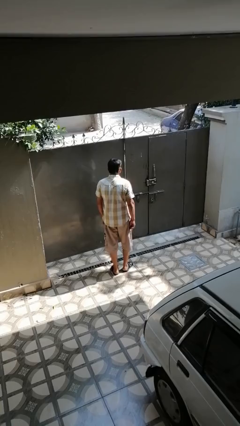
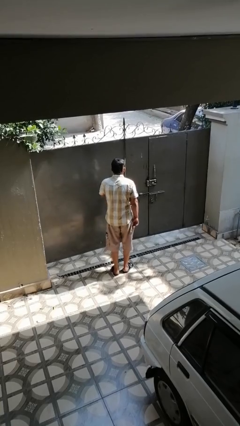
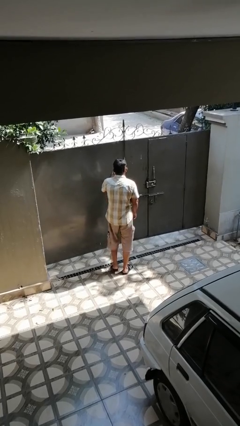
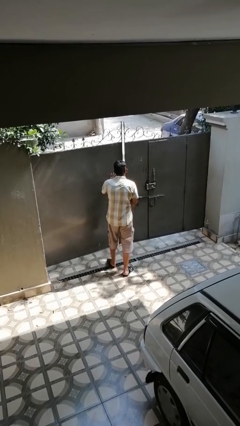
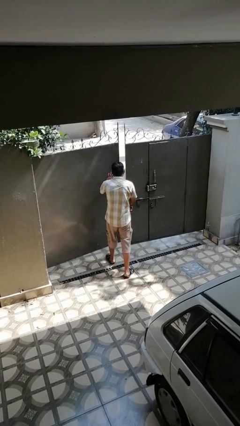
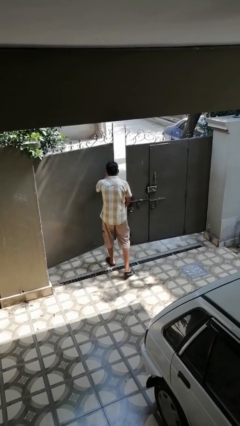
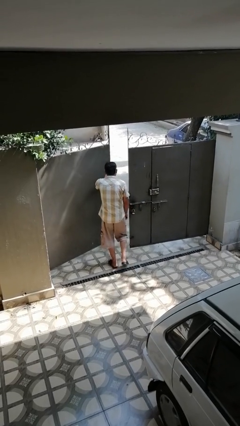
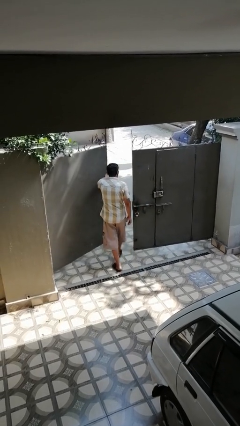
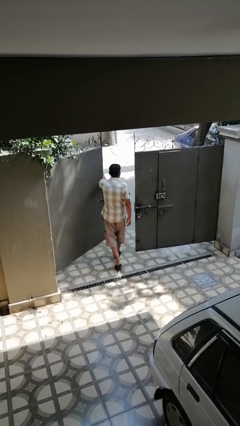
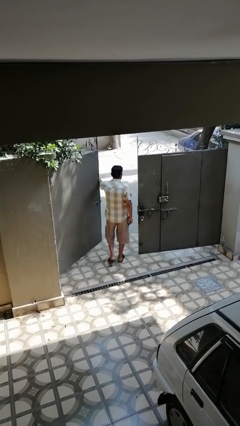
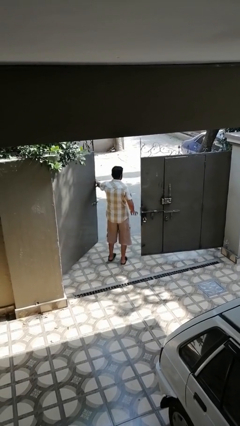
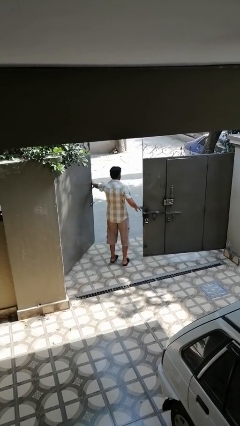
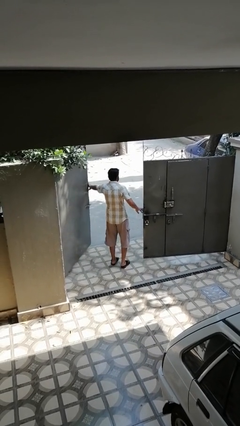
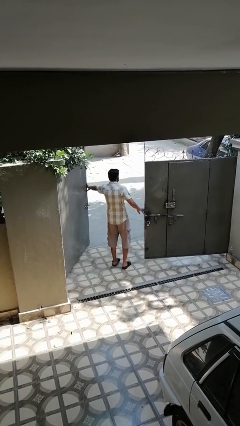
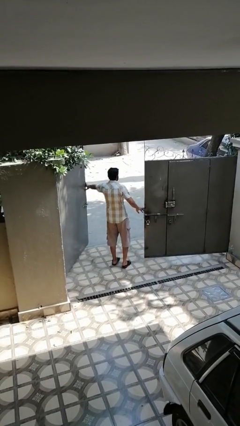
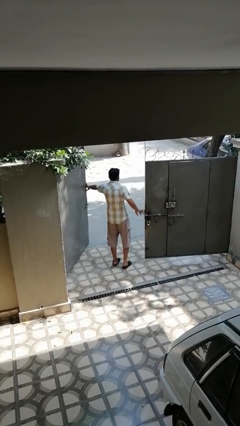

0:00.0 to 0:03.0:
person opens gate

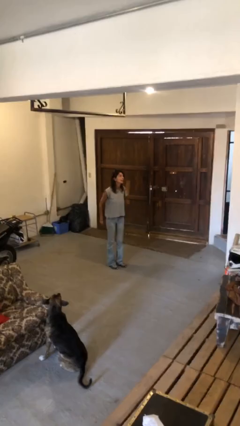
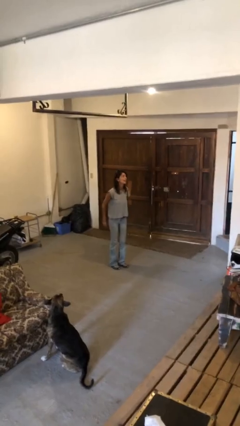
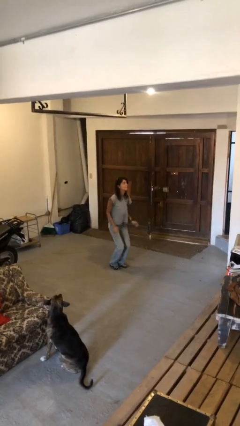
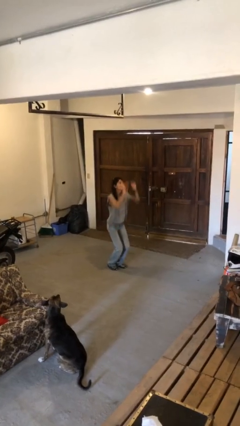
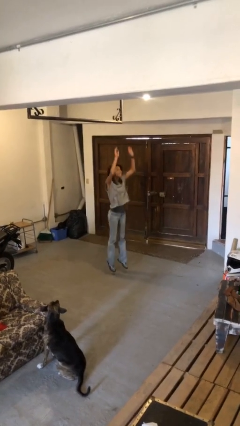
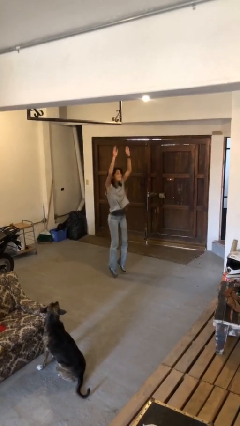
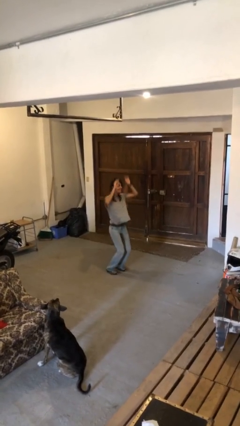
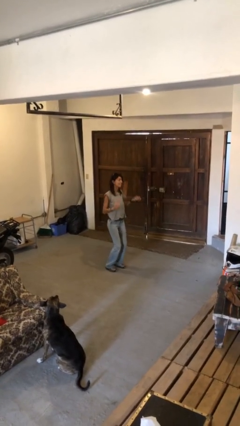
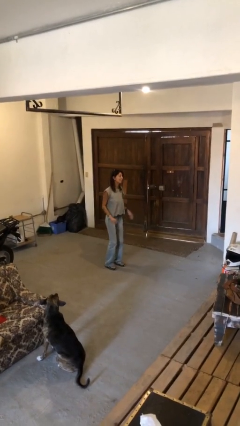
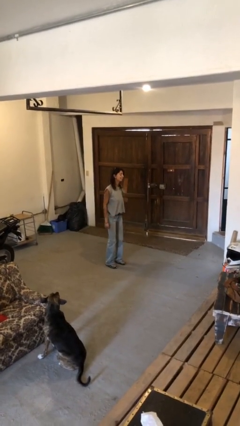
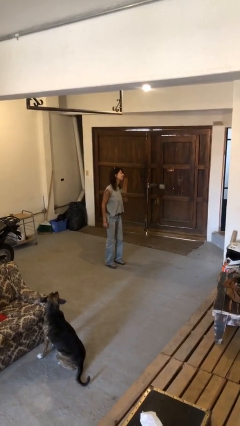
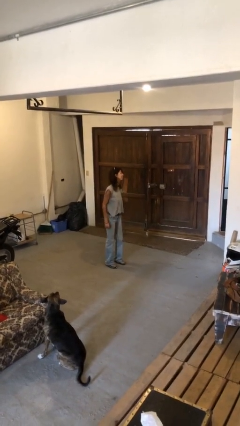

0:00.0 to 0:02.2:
person jumps

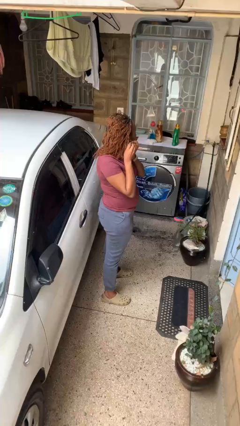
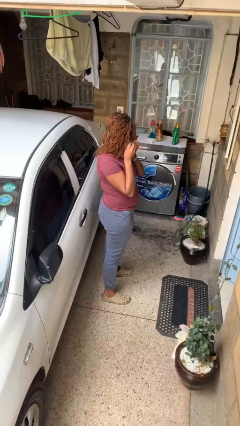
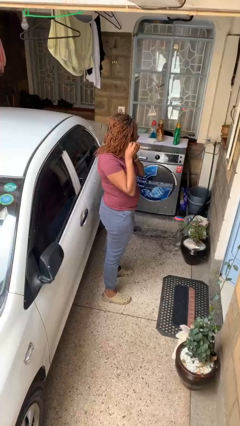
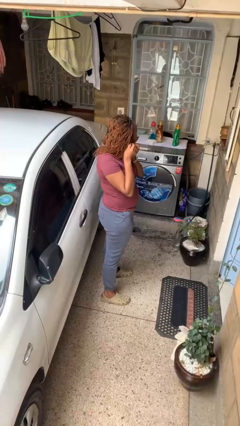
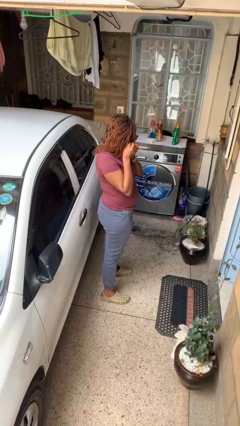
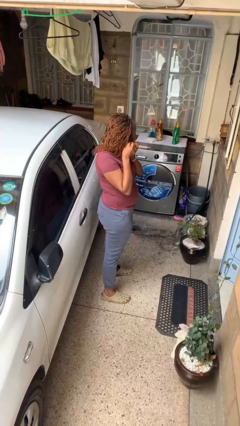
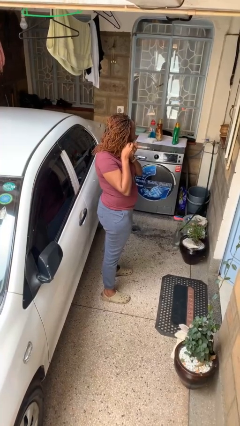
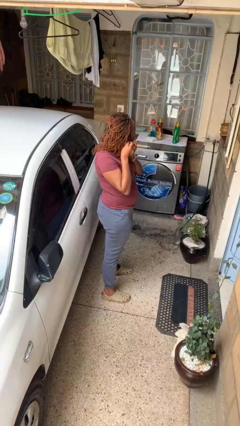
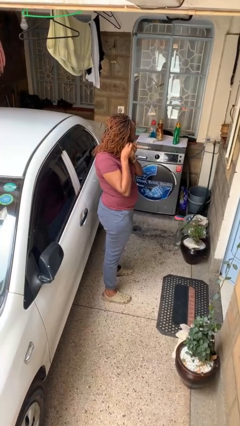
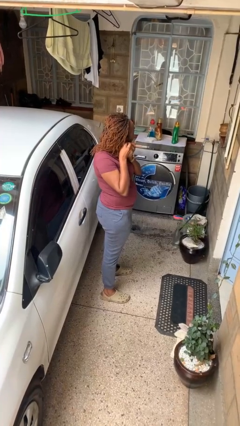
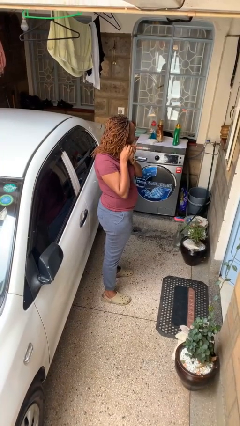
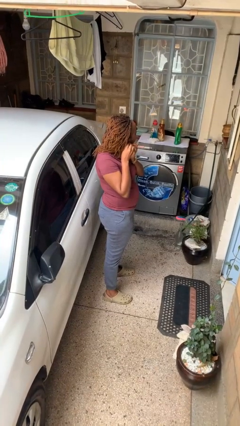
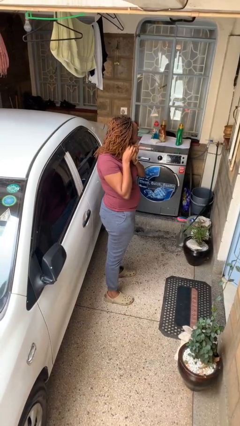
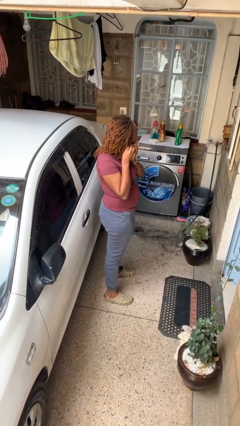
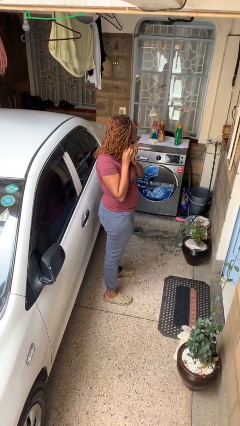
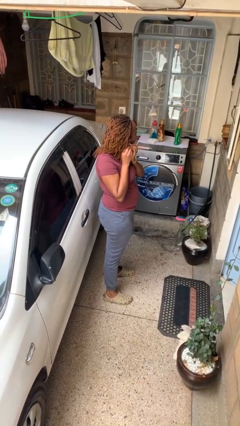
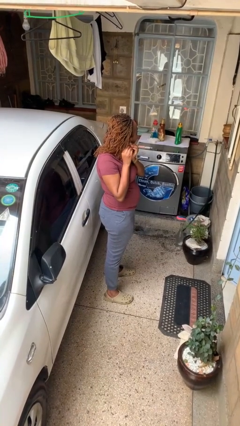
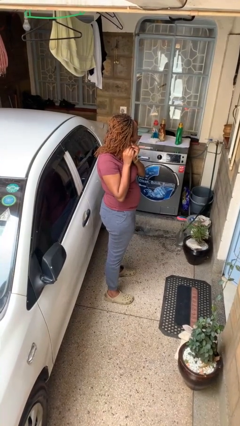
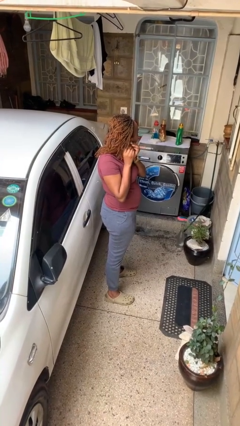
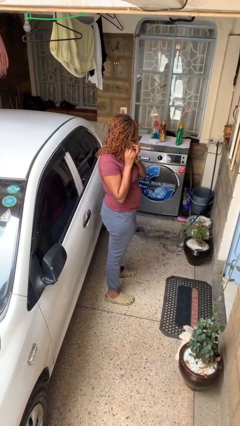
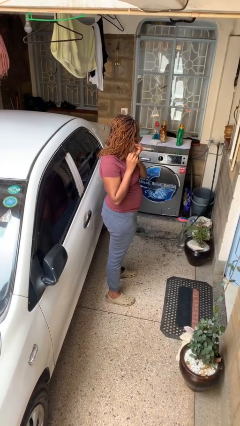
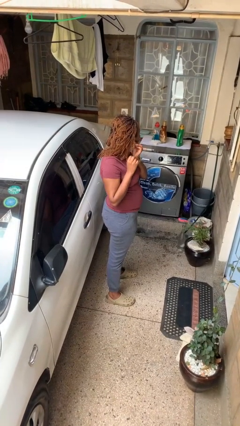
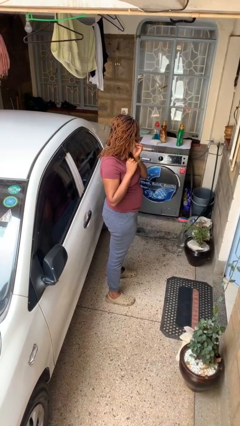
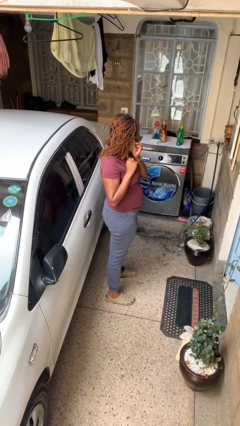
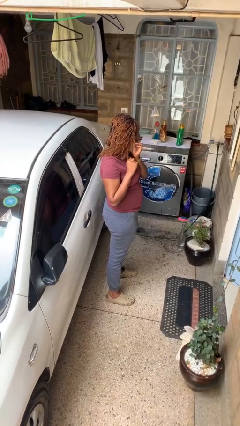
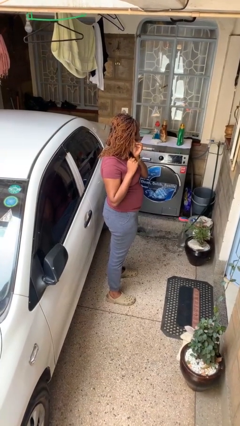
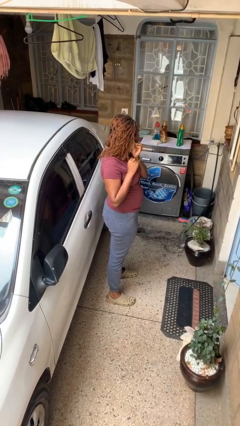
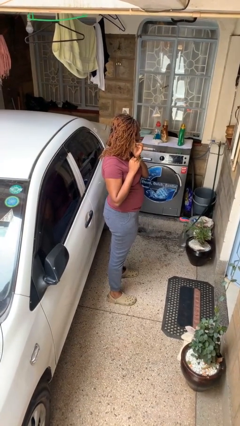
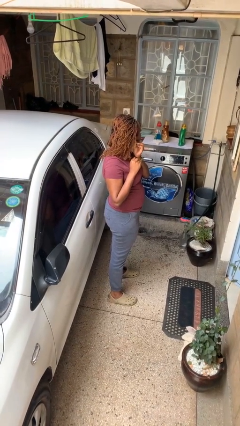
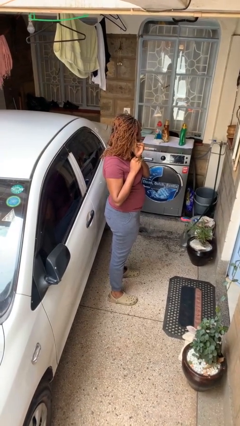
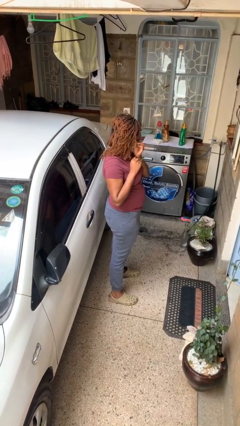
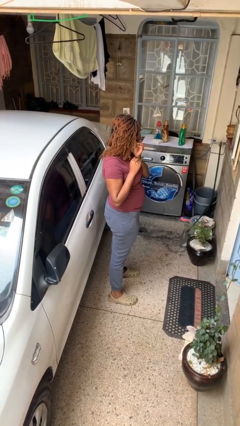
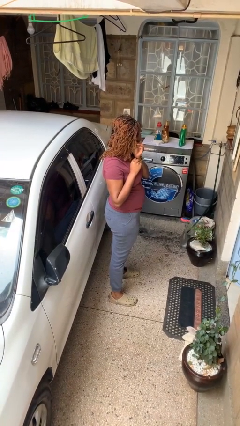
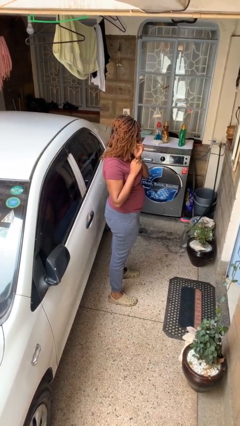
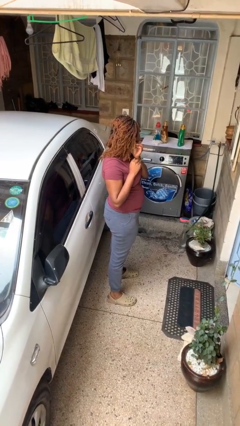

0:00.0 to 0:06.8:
person puts on earrings

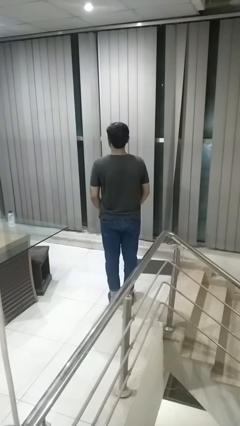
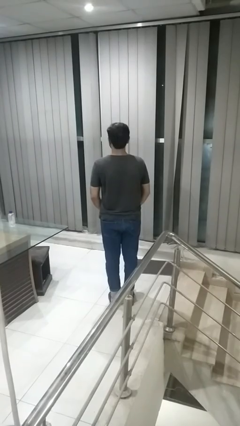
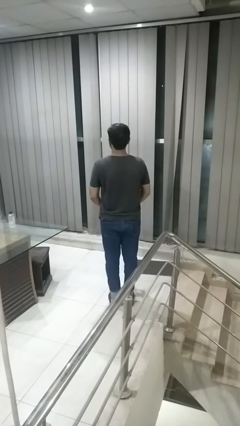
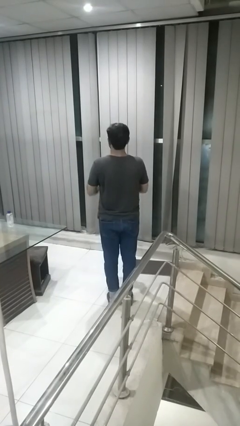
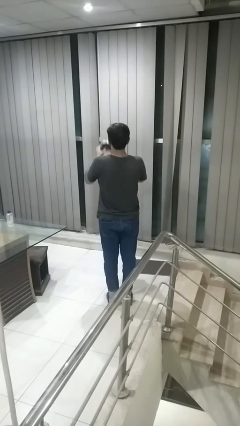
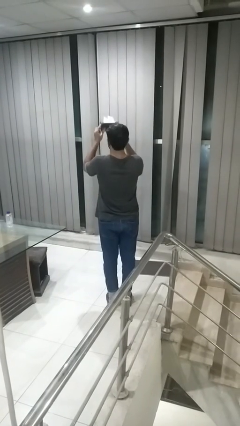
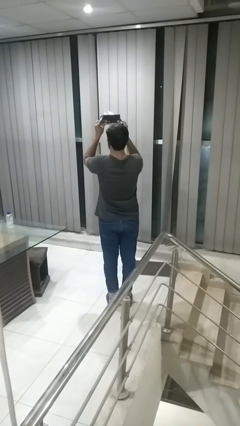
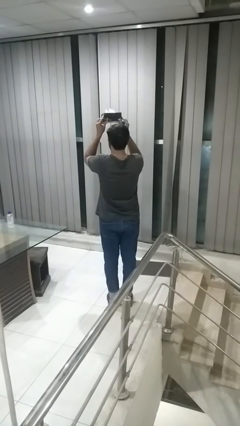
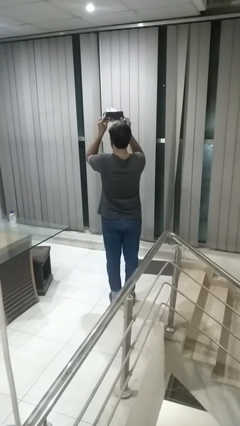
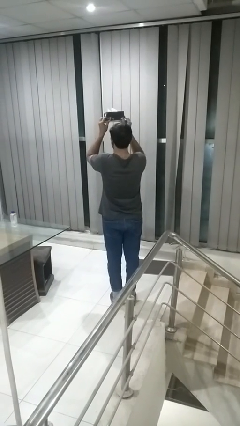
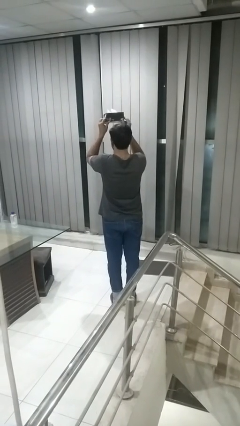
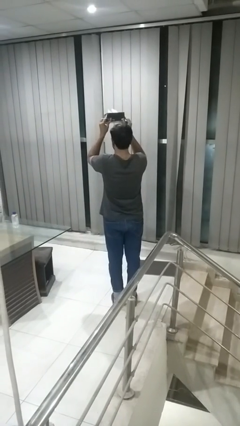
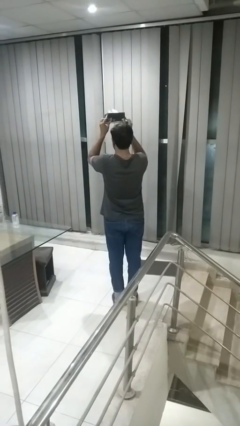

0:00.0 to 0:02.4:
person holds object above head

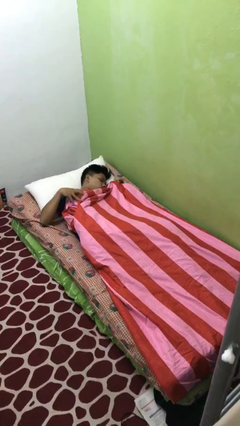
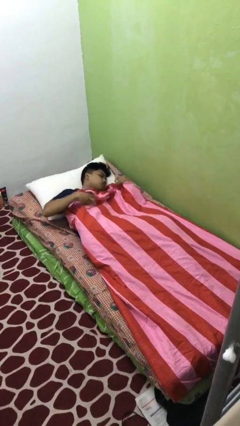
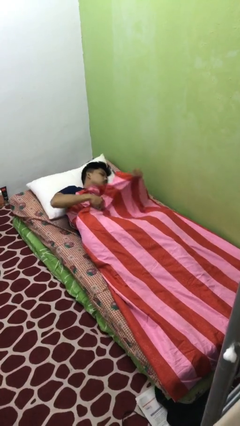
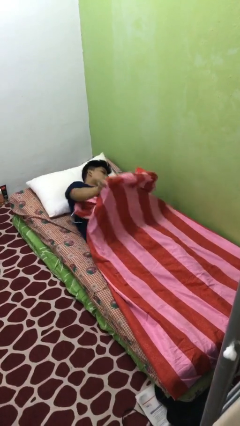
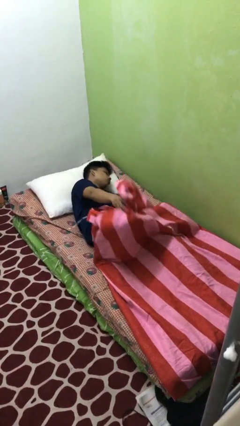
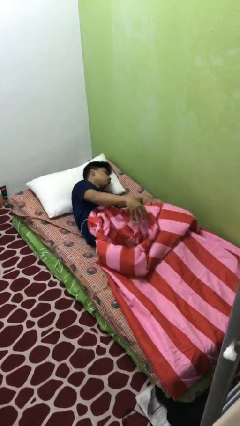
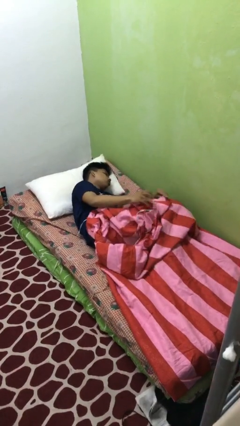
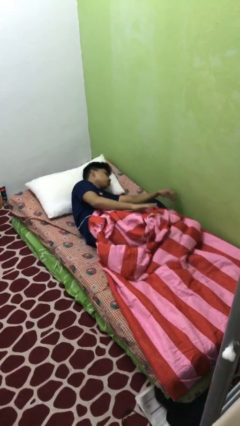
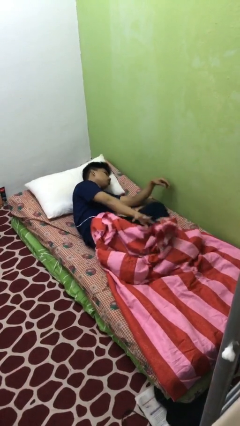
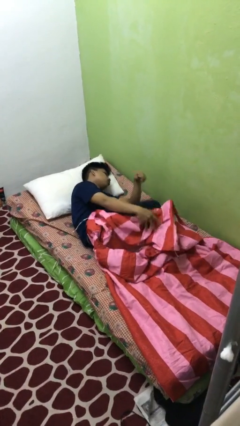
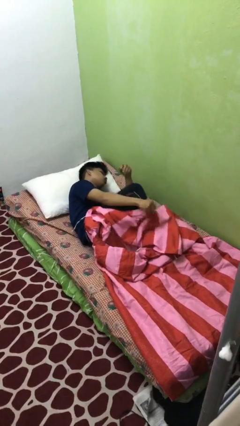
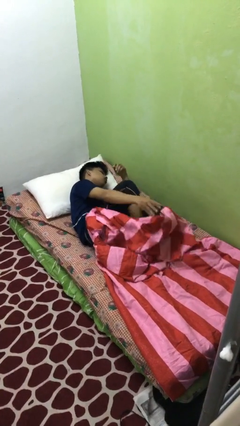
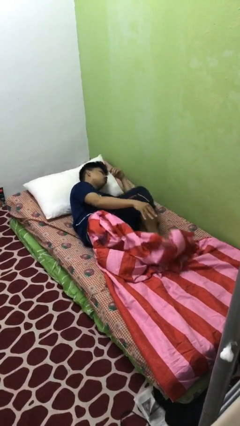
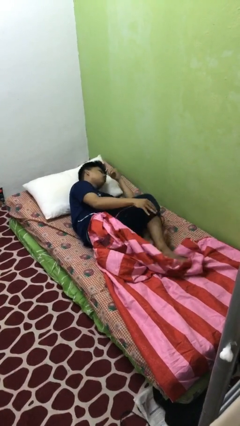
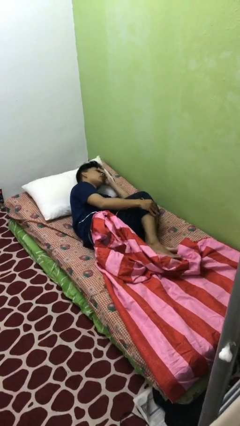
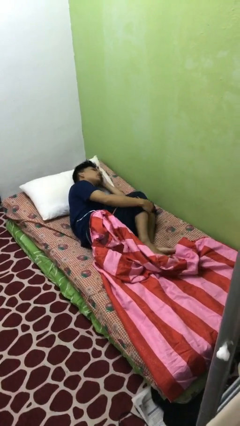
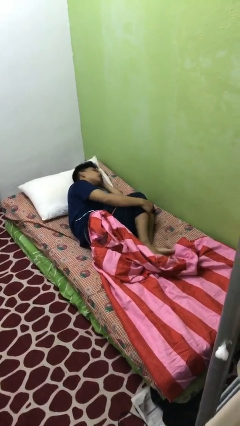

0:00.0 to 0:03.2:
person uncovers with bedsheets

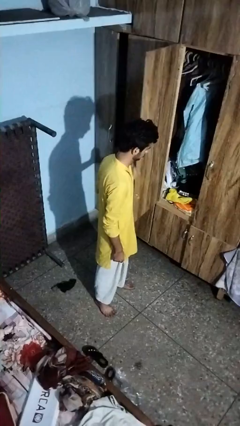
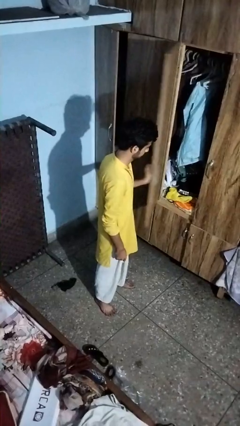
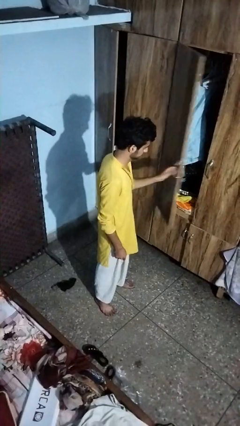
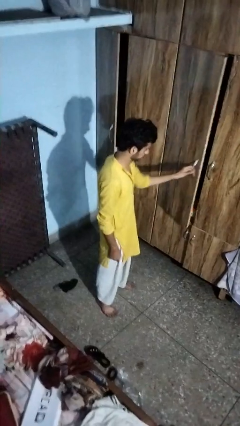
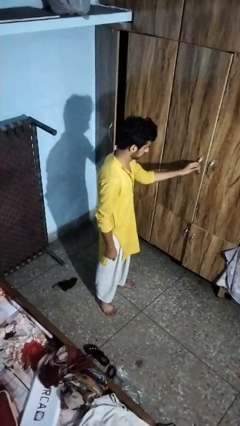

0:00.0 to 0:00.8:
person closes closet door
